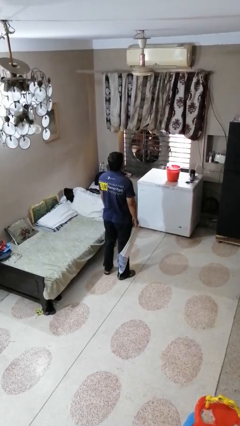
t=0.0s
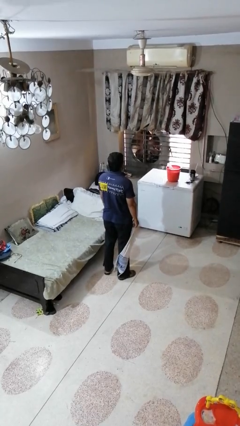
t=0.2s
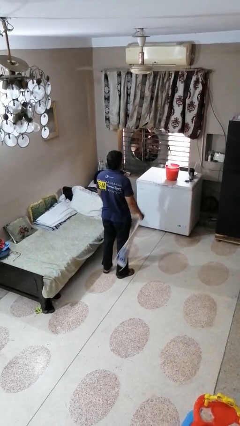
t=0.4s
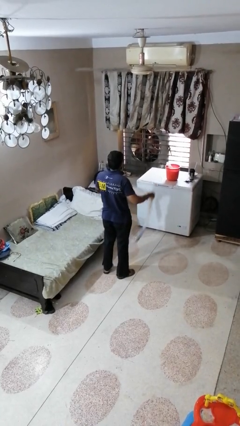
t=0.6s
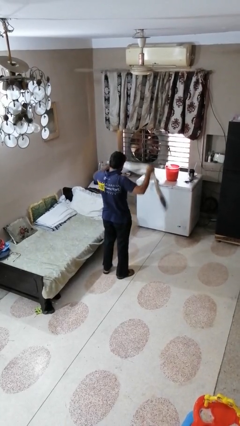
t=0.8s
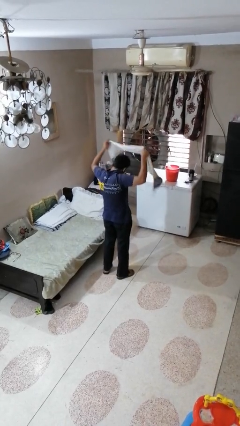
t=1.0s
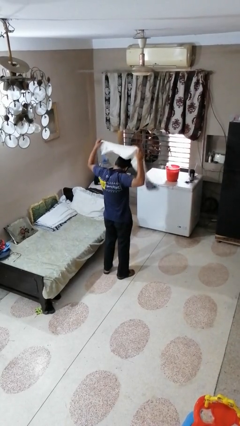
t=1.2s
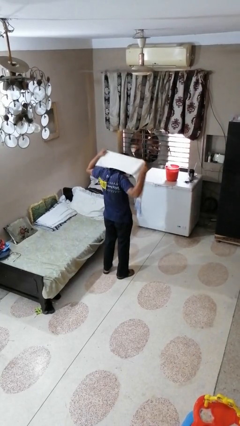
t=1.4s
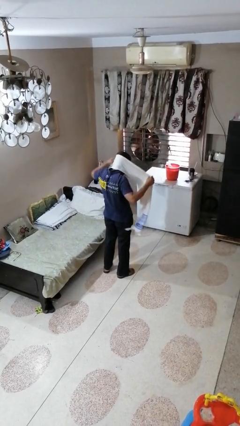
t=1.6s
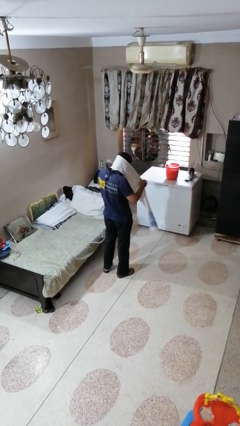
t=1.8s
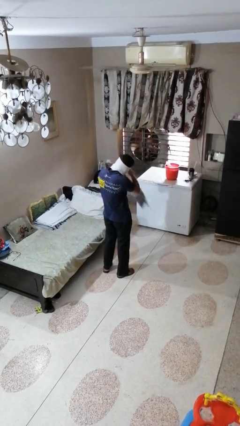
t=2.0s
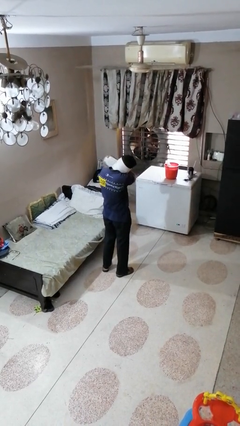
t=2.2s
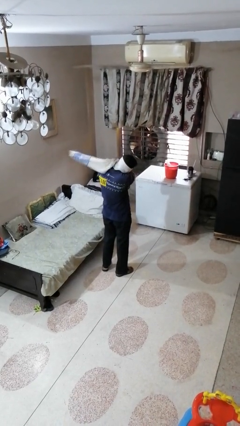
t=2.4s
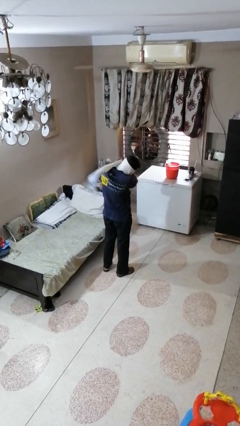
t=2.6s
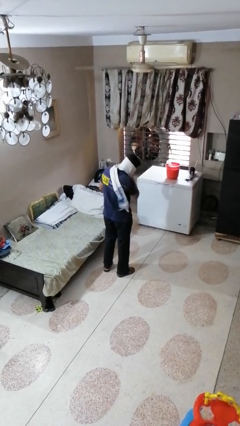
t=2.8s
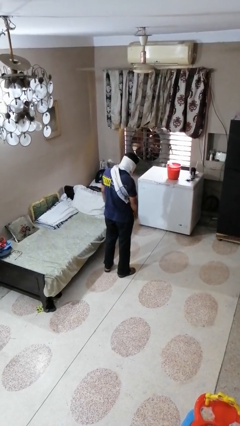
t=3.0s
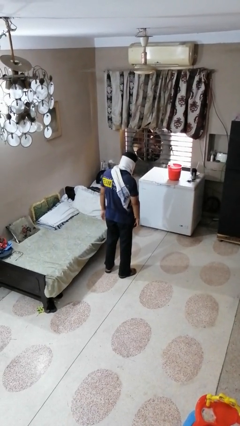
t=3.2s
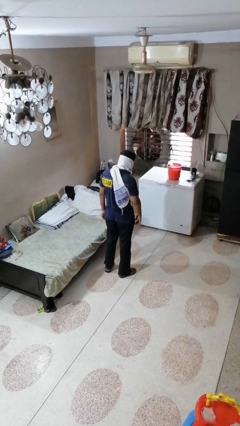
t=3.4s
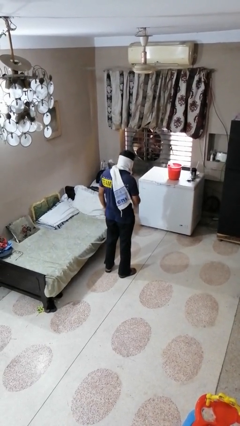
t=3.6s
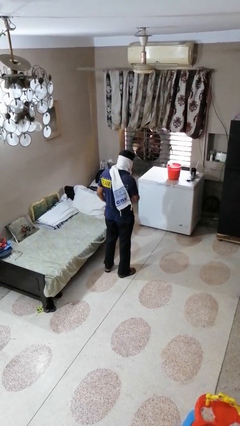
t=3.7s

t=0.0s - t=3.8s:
person puts on scarf

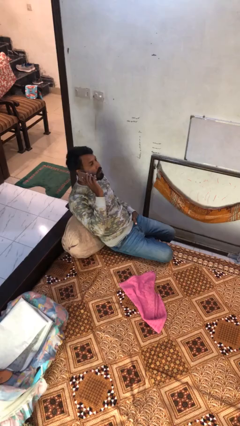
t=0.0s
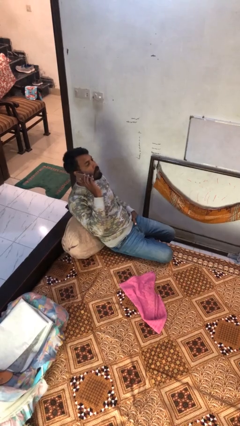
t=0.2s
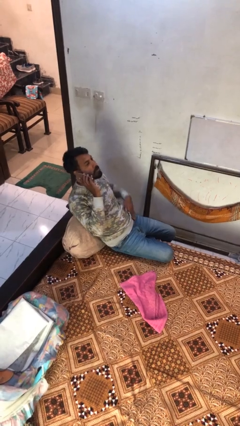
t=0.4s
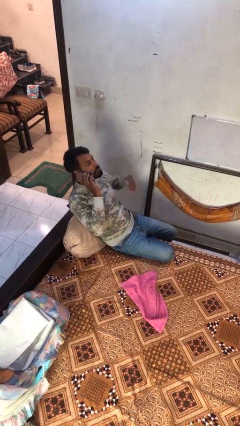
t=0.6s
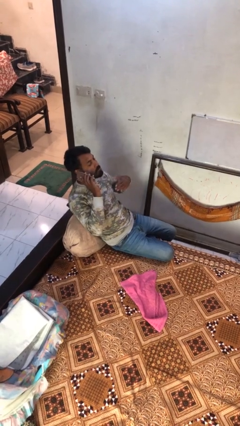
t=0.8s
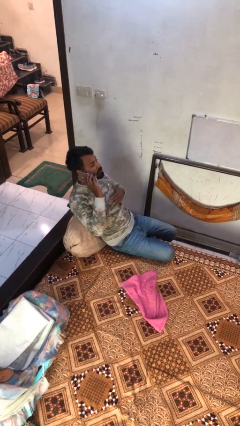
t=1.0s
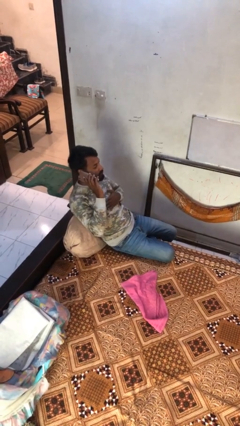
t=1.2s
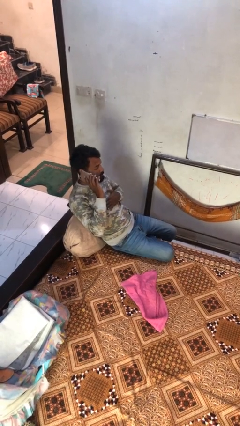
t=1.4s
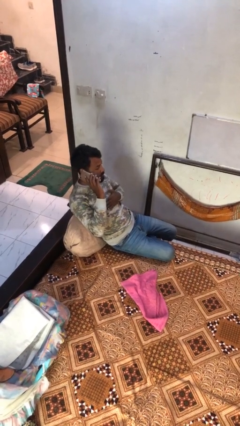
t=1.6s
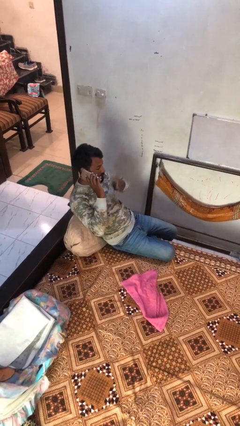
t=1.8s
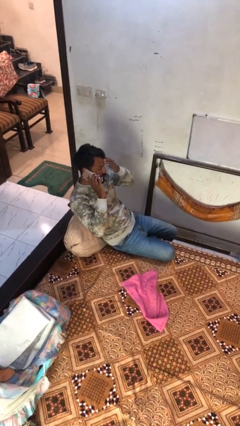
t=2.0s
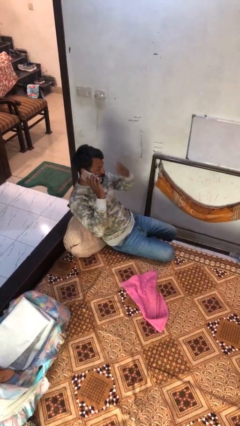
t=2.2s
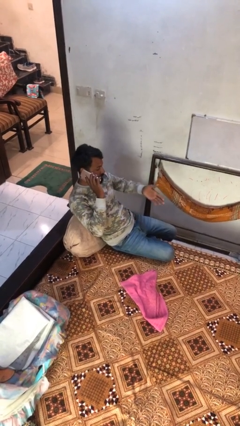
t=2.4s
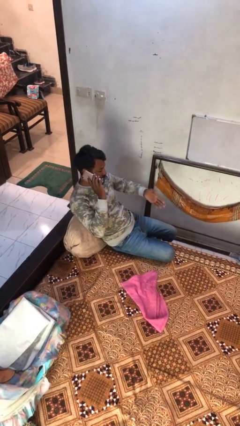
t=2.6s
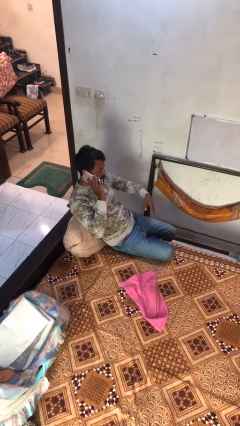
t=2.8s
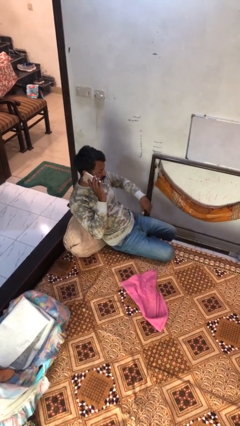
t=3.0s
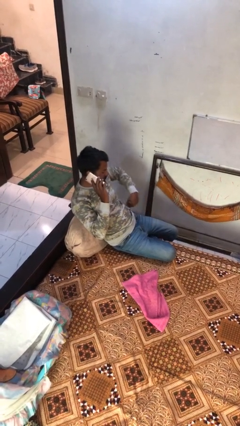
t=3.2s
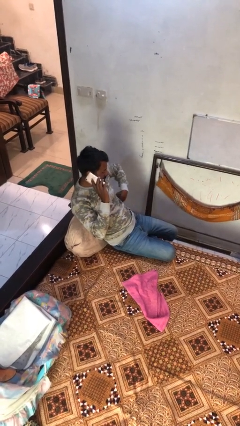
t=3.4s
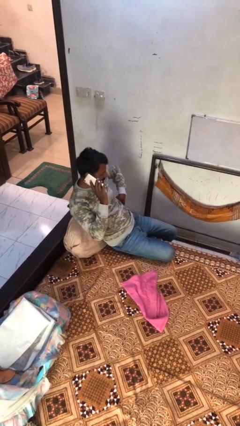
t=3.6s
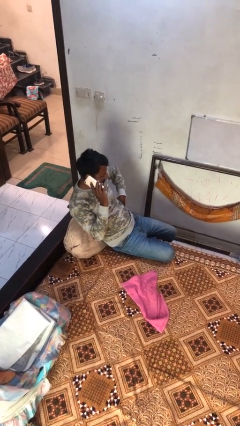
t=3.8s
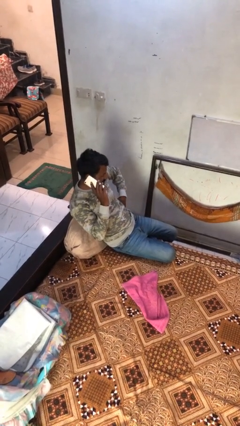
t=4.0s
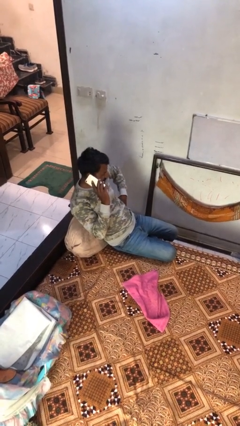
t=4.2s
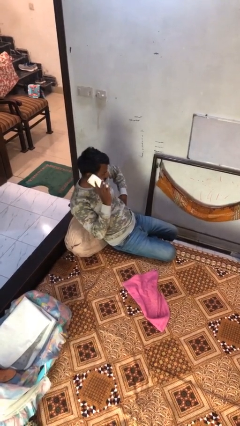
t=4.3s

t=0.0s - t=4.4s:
person talks on phone

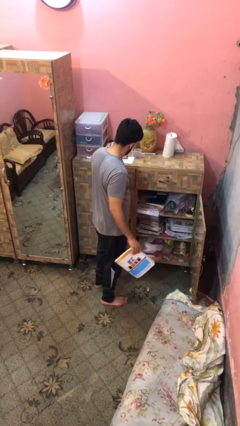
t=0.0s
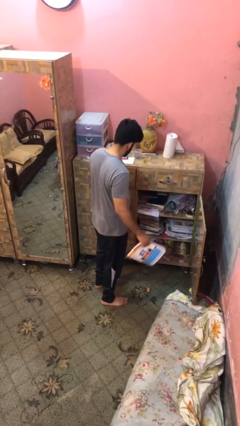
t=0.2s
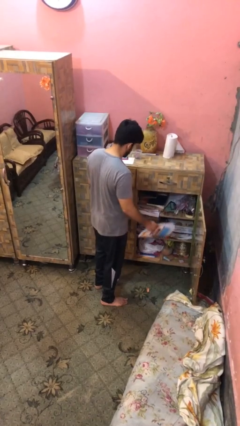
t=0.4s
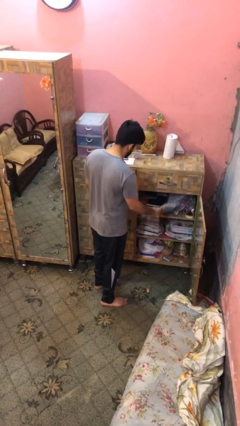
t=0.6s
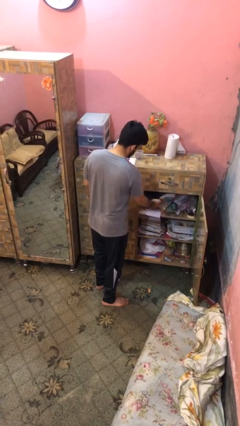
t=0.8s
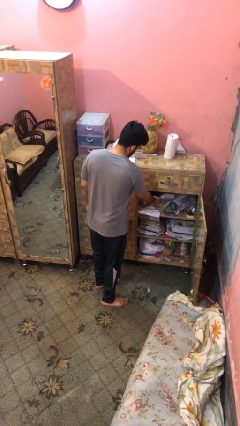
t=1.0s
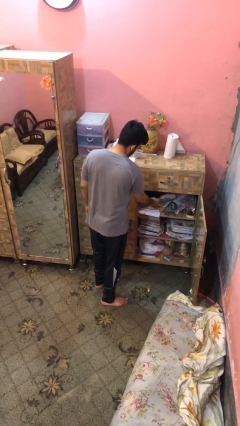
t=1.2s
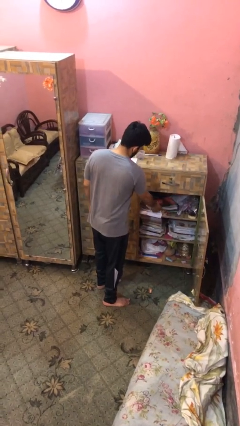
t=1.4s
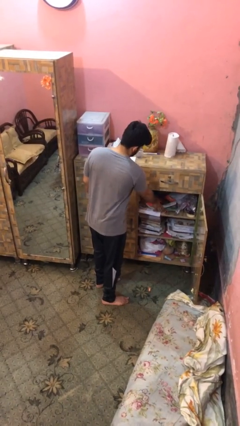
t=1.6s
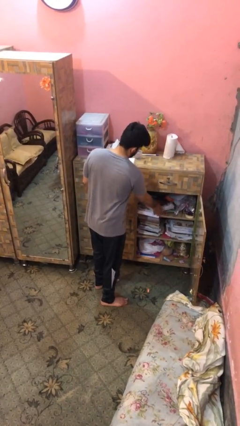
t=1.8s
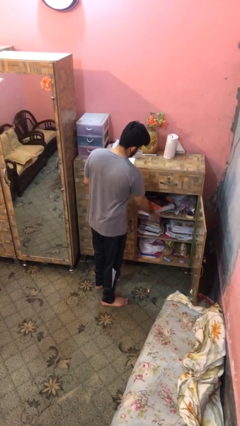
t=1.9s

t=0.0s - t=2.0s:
person puts down object into cabinet

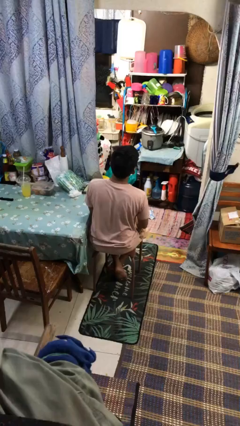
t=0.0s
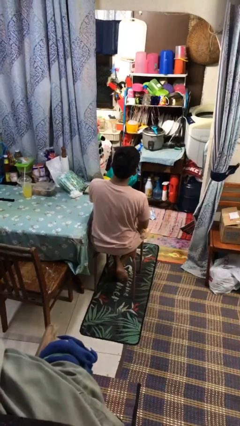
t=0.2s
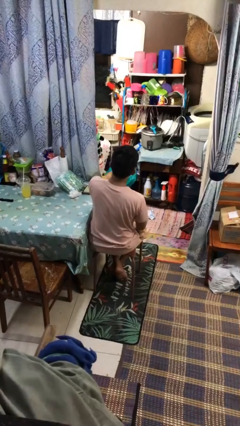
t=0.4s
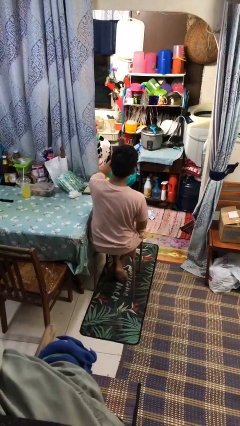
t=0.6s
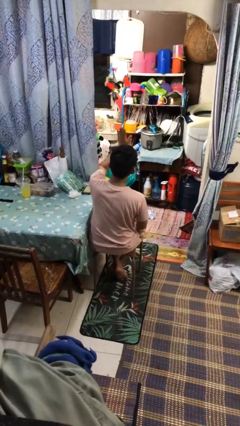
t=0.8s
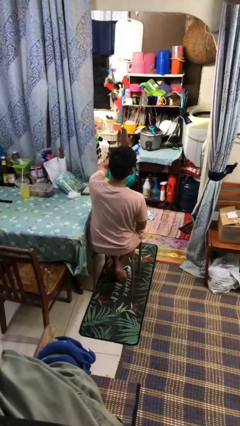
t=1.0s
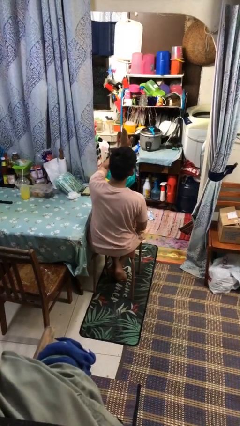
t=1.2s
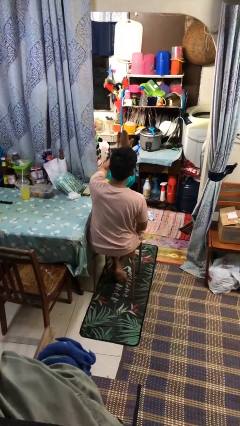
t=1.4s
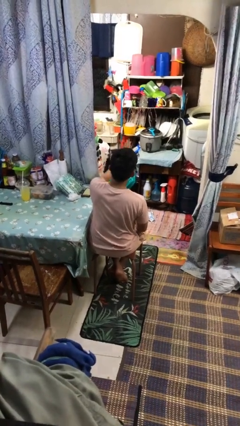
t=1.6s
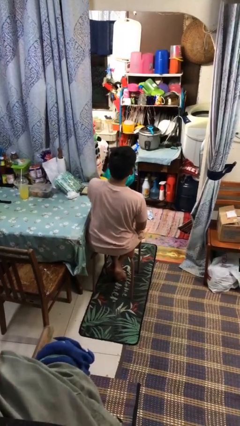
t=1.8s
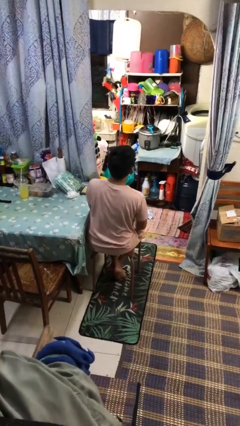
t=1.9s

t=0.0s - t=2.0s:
person gestures stop

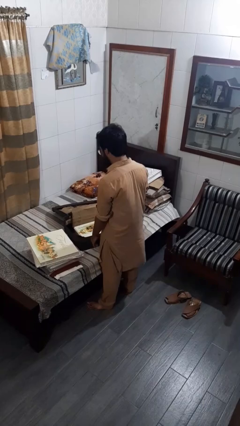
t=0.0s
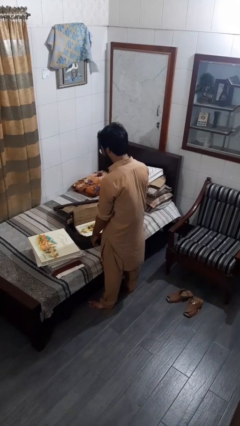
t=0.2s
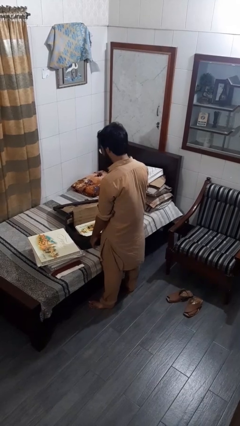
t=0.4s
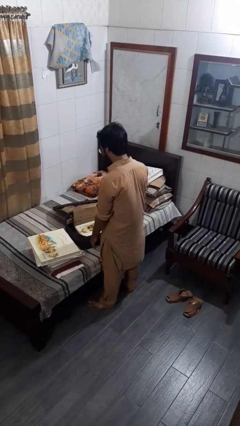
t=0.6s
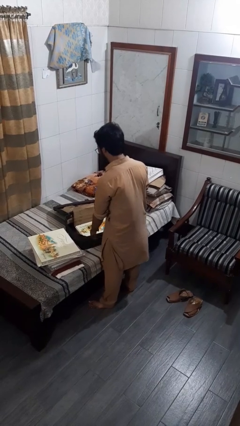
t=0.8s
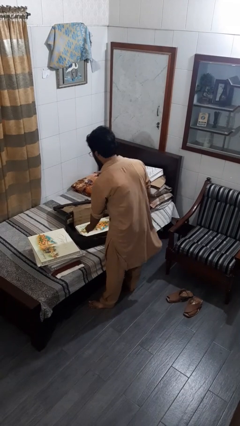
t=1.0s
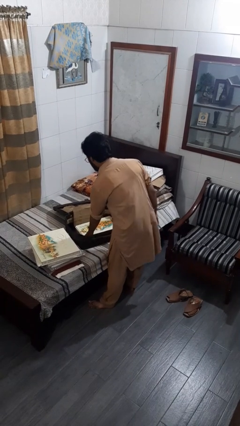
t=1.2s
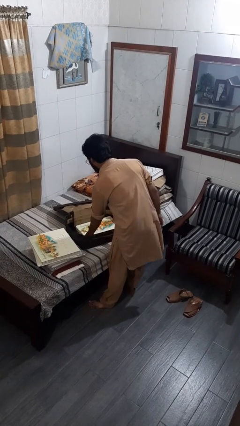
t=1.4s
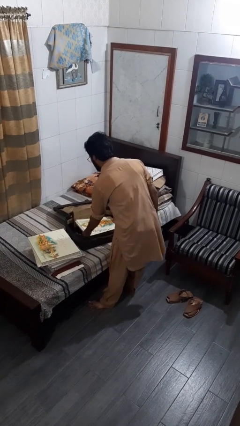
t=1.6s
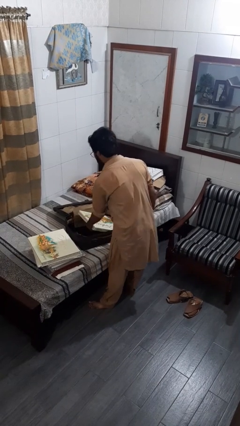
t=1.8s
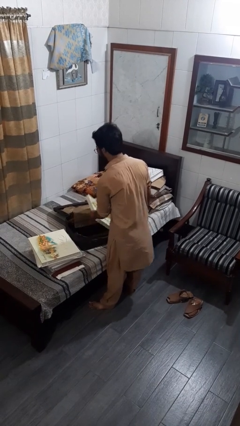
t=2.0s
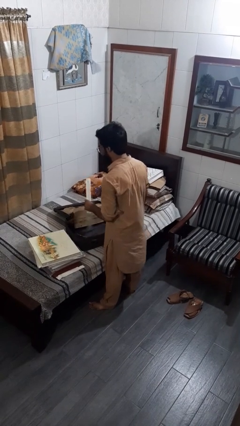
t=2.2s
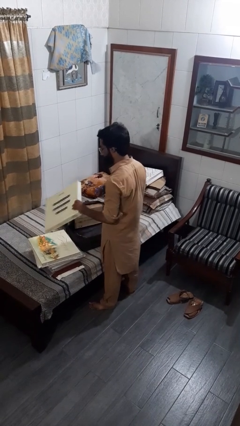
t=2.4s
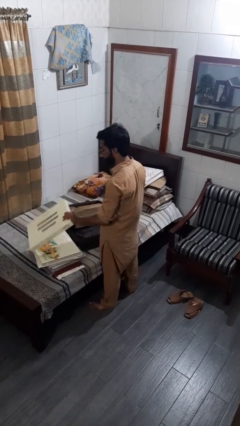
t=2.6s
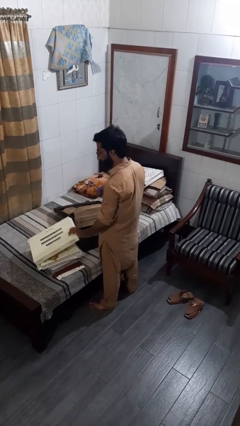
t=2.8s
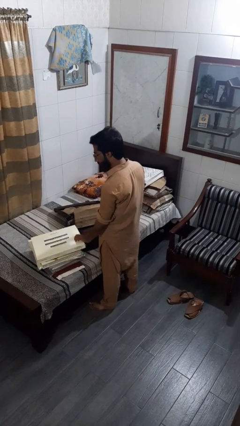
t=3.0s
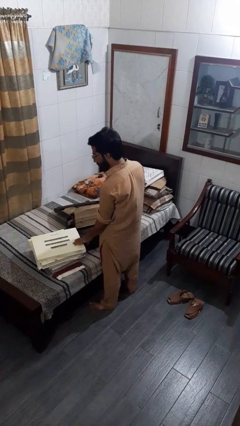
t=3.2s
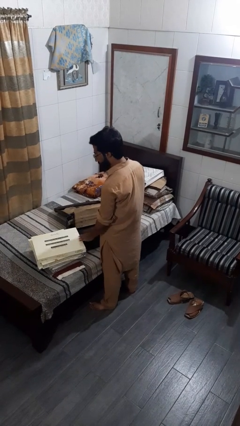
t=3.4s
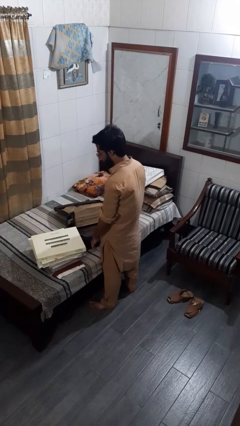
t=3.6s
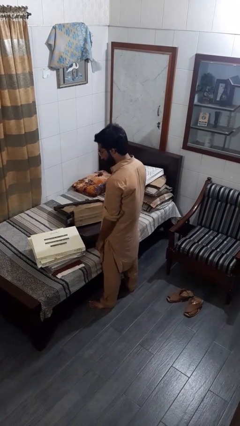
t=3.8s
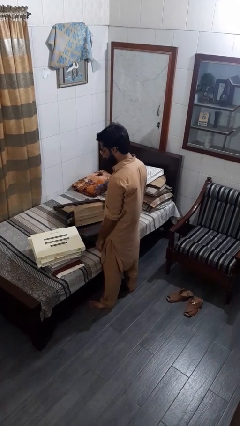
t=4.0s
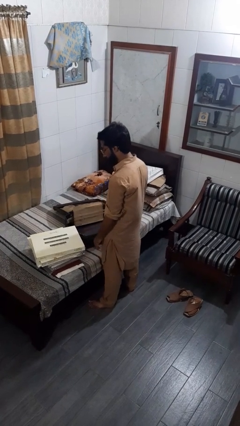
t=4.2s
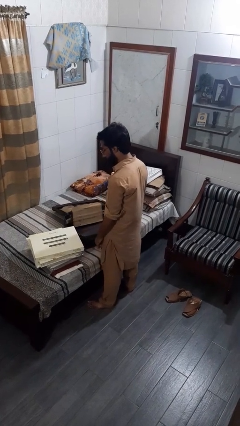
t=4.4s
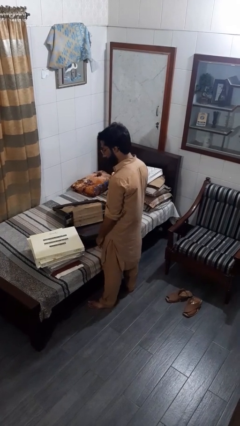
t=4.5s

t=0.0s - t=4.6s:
person unloads clothes from suitcase

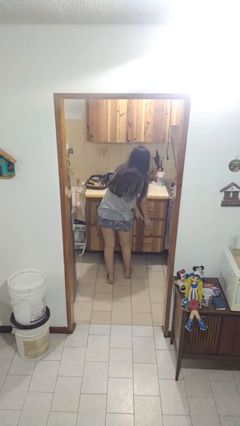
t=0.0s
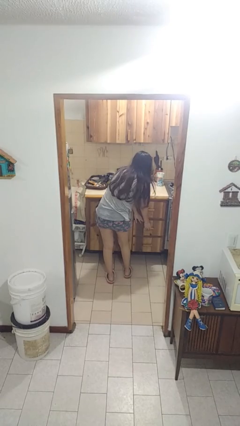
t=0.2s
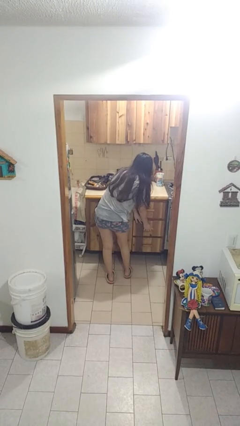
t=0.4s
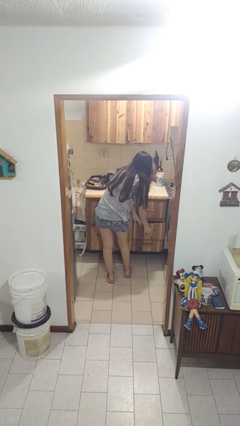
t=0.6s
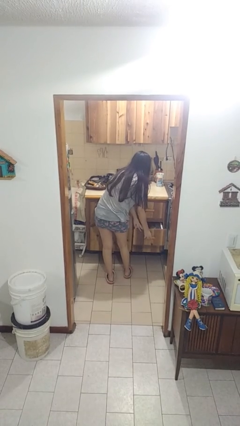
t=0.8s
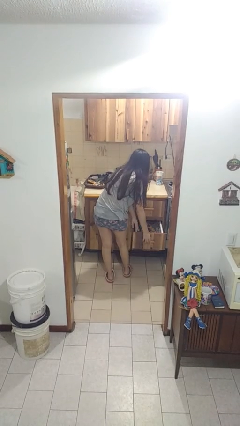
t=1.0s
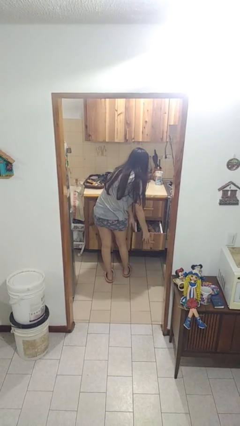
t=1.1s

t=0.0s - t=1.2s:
person opens kitchen drawer
